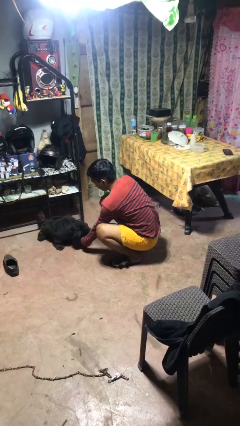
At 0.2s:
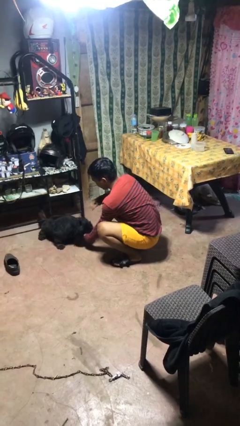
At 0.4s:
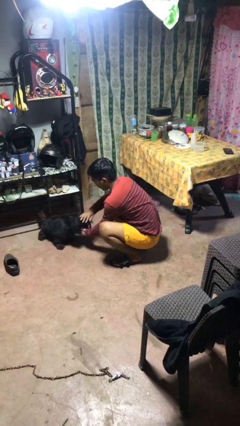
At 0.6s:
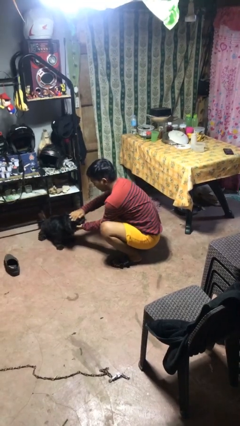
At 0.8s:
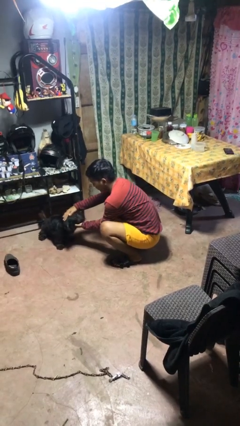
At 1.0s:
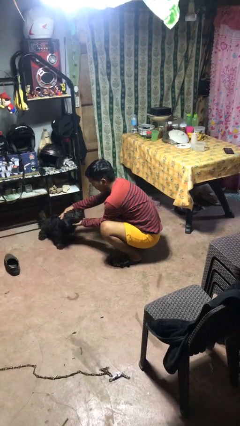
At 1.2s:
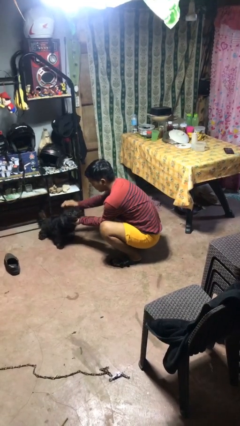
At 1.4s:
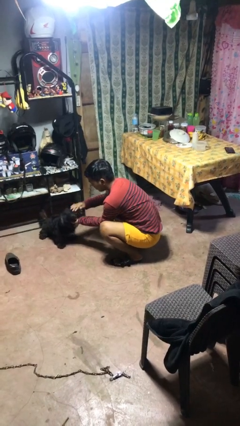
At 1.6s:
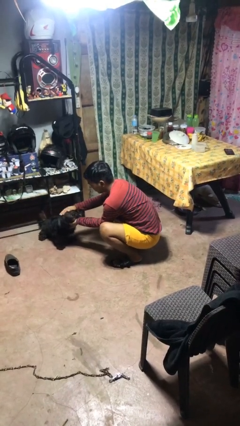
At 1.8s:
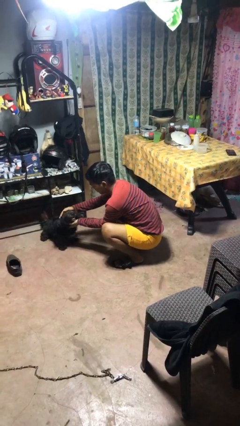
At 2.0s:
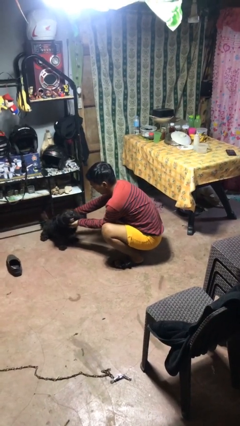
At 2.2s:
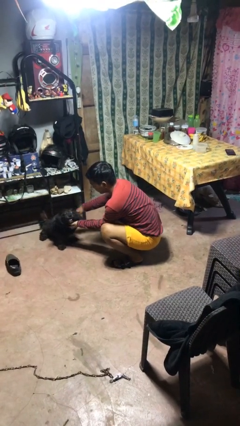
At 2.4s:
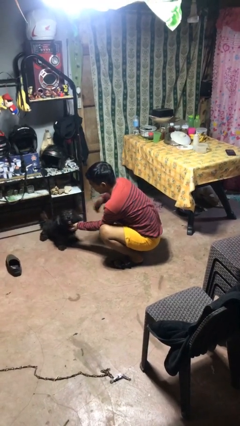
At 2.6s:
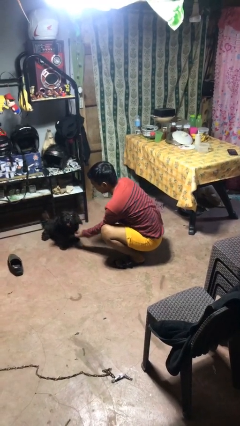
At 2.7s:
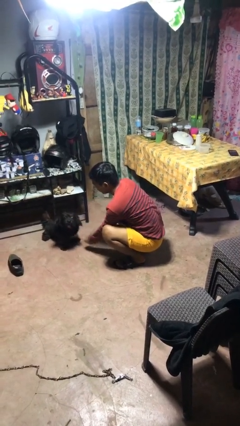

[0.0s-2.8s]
person pets dog

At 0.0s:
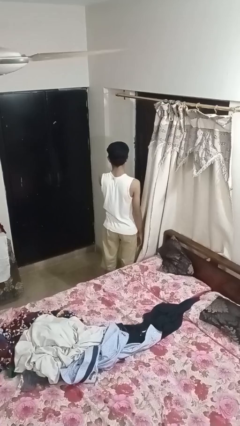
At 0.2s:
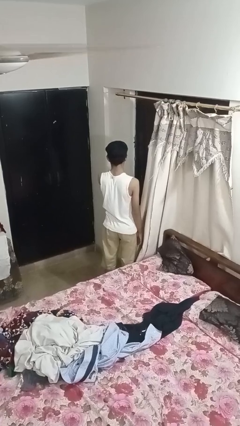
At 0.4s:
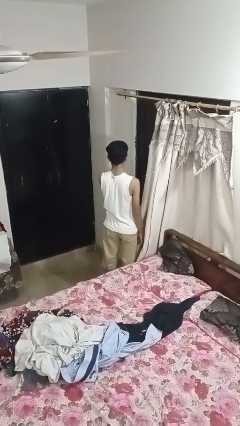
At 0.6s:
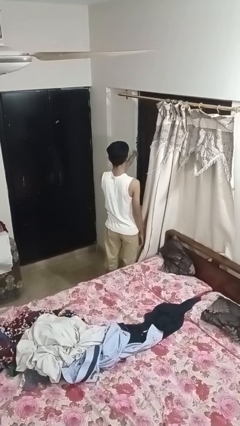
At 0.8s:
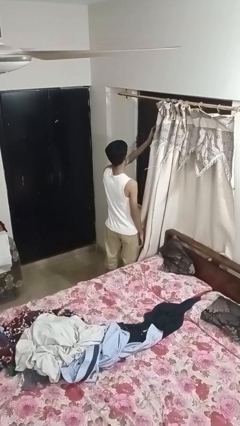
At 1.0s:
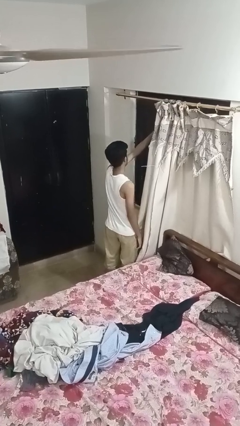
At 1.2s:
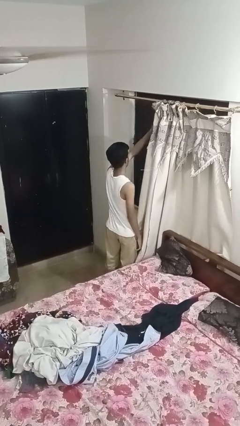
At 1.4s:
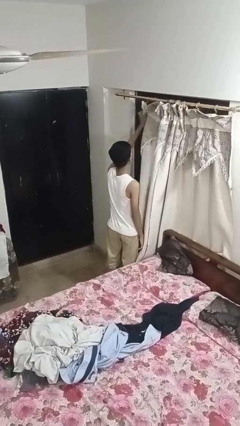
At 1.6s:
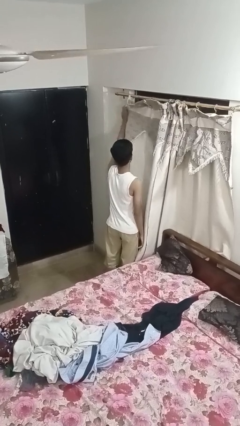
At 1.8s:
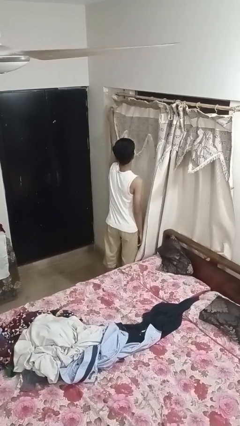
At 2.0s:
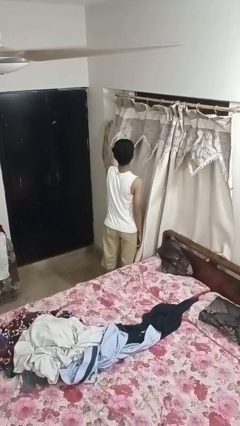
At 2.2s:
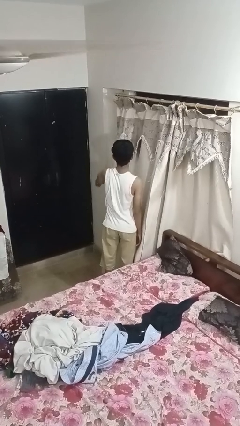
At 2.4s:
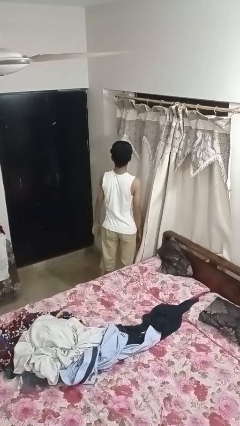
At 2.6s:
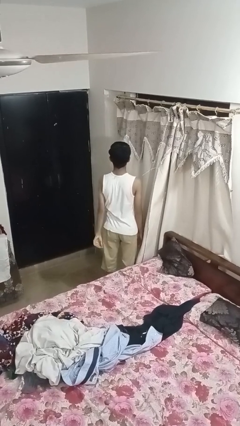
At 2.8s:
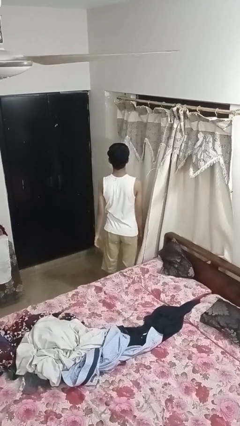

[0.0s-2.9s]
person closes curtains

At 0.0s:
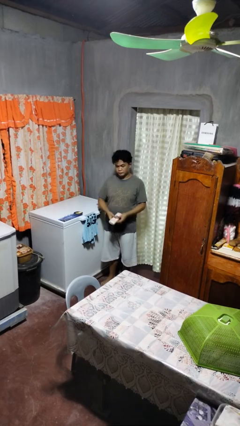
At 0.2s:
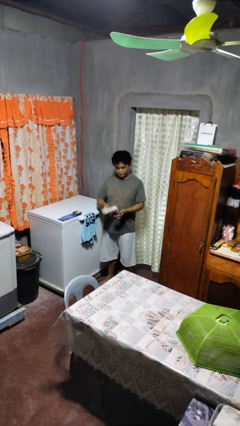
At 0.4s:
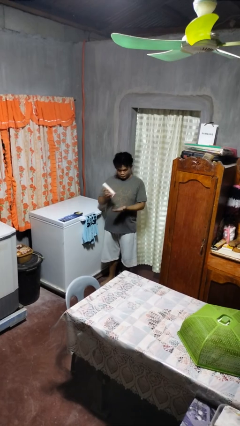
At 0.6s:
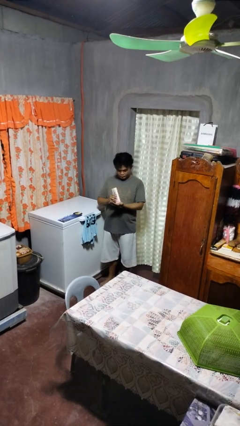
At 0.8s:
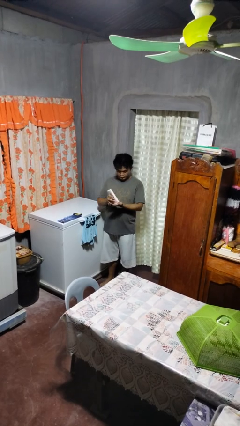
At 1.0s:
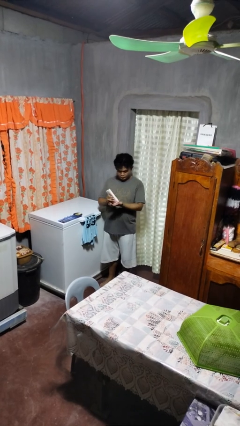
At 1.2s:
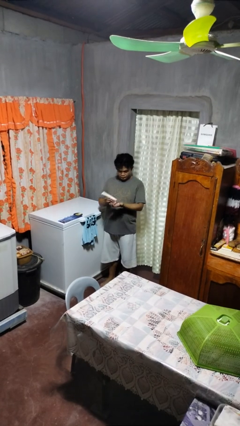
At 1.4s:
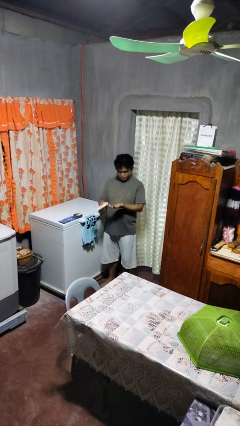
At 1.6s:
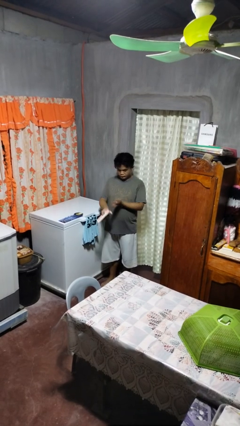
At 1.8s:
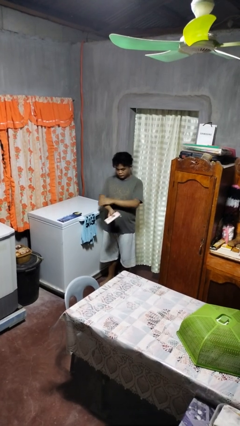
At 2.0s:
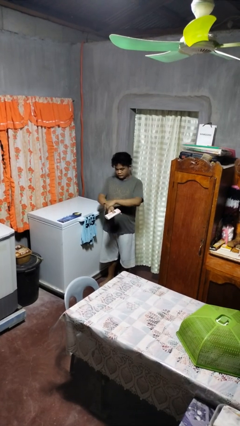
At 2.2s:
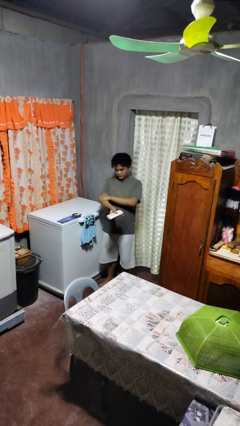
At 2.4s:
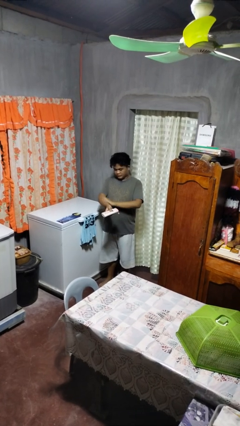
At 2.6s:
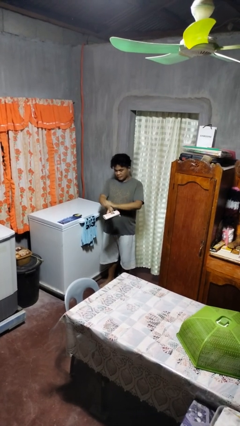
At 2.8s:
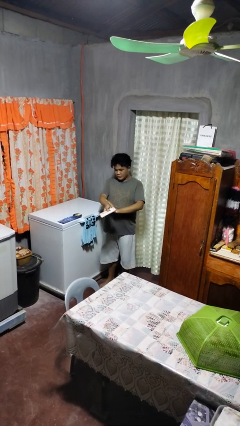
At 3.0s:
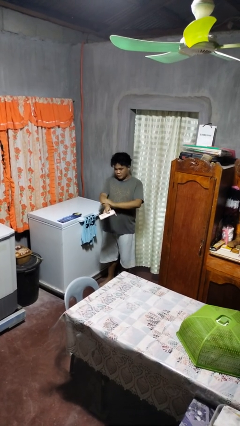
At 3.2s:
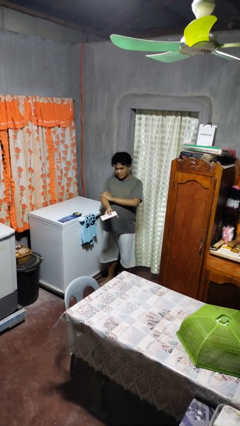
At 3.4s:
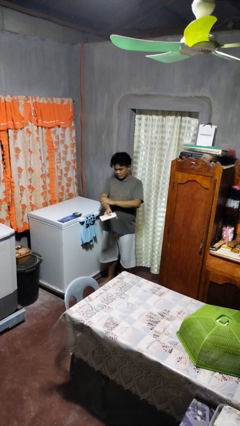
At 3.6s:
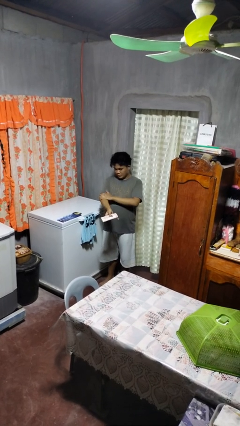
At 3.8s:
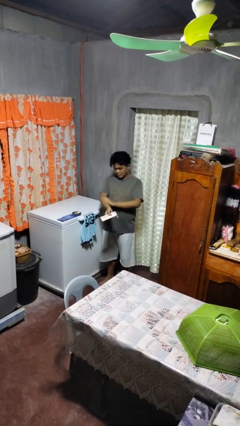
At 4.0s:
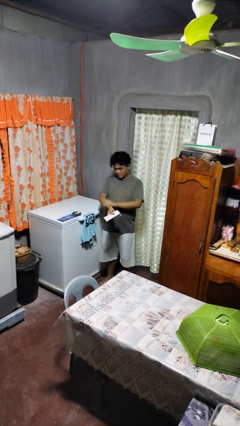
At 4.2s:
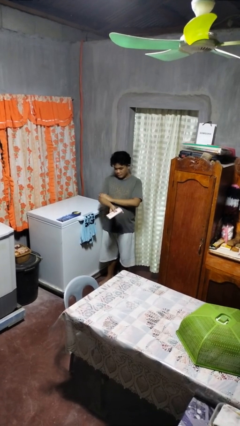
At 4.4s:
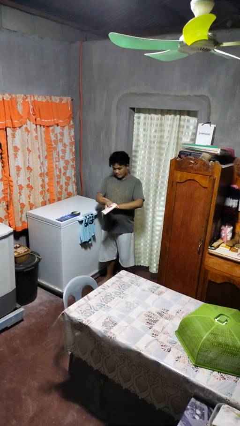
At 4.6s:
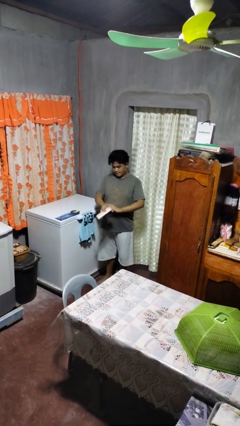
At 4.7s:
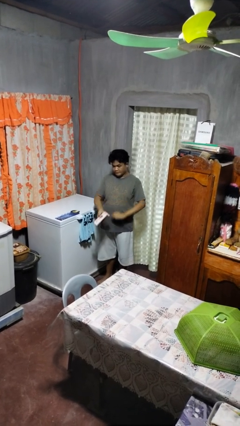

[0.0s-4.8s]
person applies sunscreen

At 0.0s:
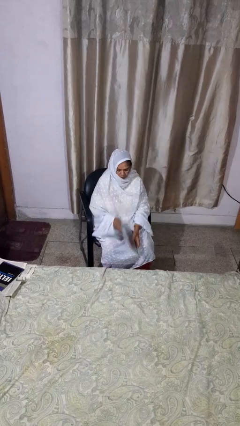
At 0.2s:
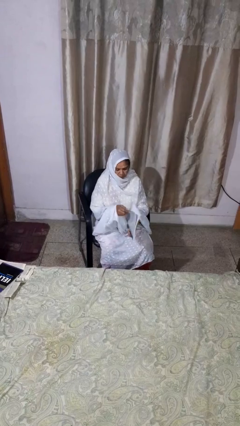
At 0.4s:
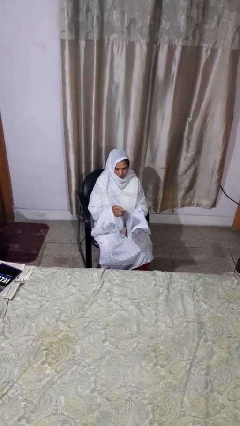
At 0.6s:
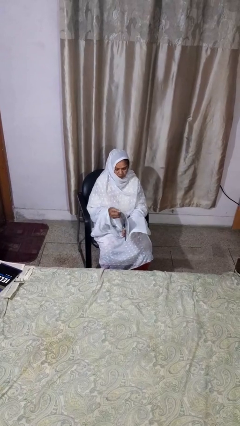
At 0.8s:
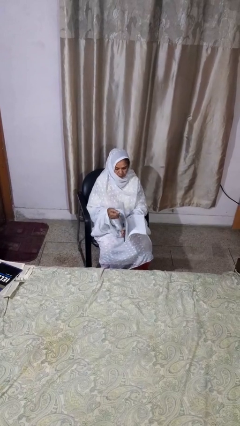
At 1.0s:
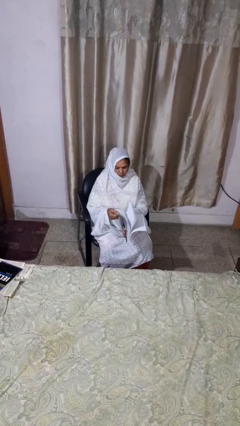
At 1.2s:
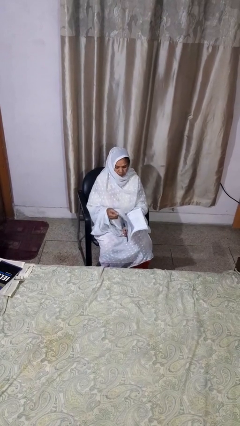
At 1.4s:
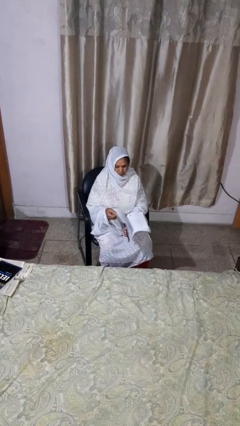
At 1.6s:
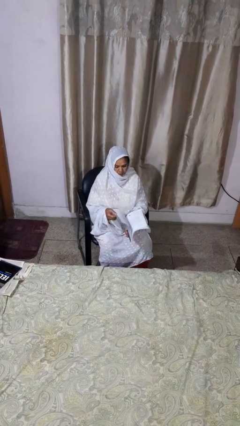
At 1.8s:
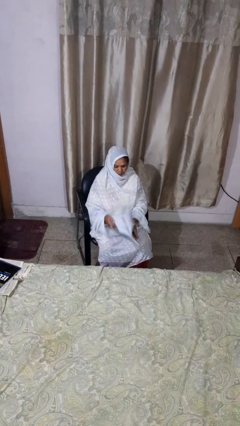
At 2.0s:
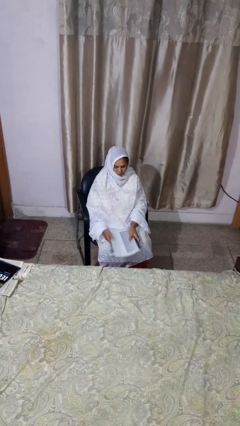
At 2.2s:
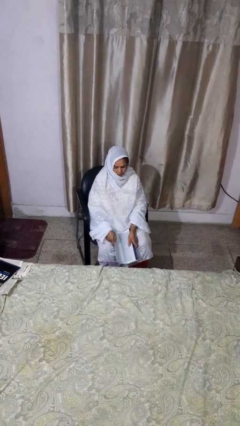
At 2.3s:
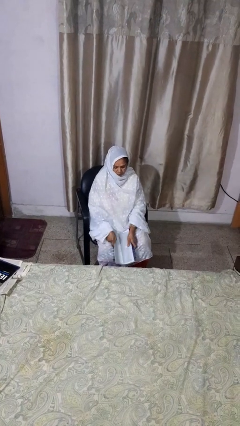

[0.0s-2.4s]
person reads magazine

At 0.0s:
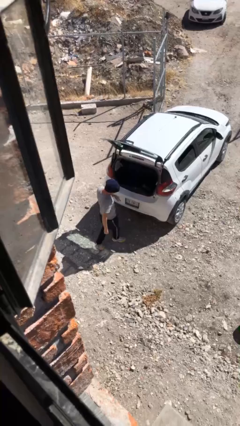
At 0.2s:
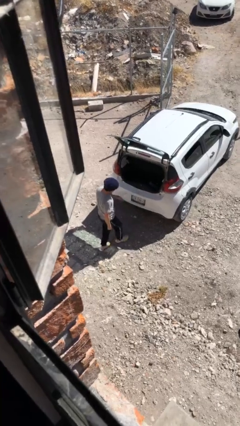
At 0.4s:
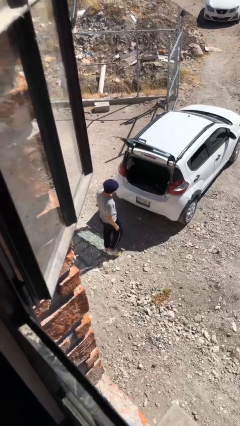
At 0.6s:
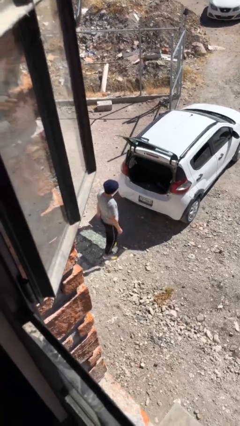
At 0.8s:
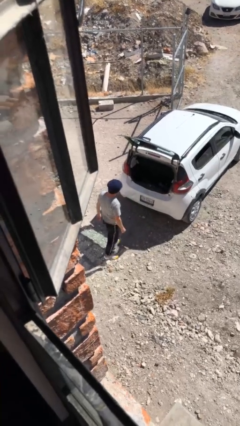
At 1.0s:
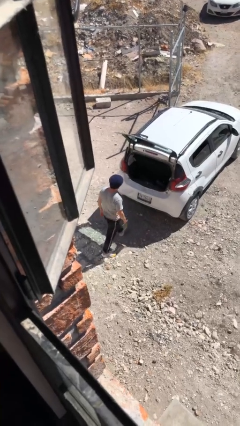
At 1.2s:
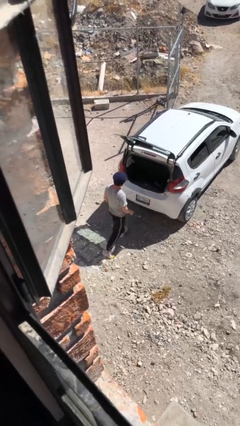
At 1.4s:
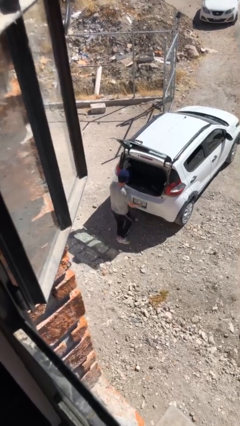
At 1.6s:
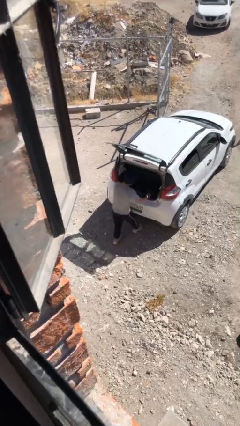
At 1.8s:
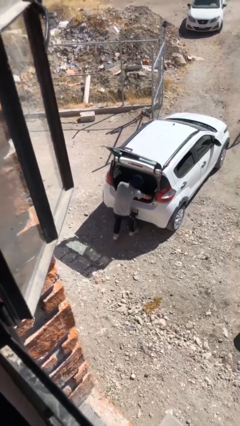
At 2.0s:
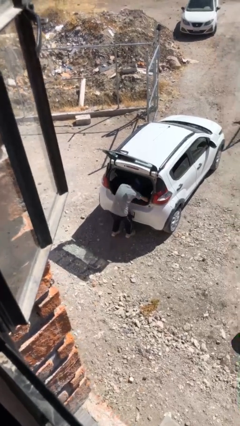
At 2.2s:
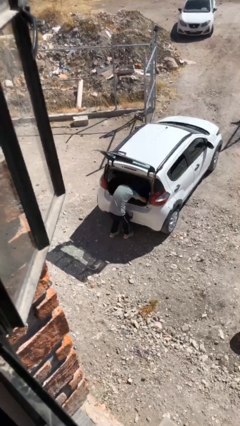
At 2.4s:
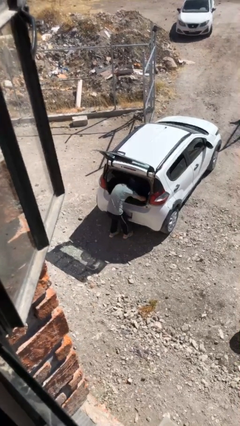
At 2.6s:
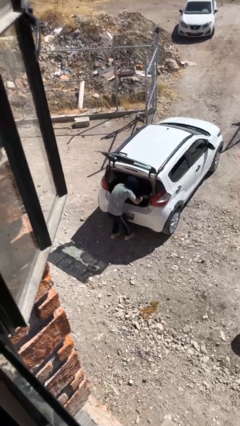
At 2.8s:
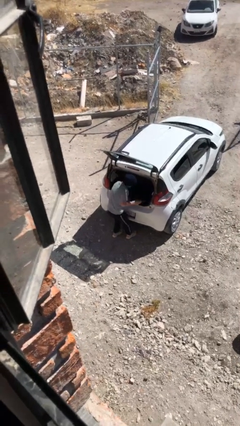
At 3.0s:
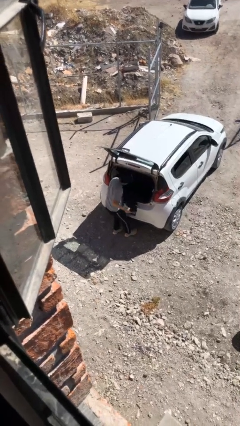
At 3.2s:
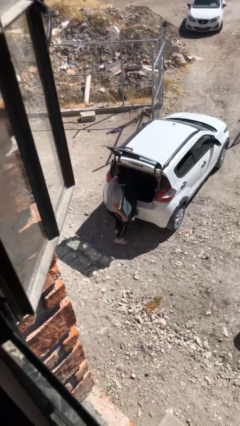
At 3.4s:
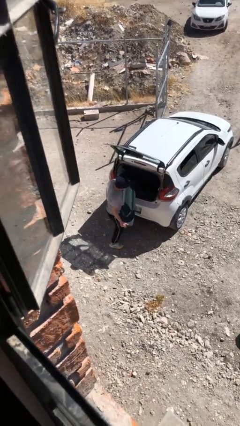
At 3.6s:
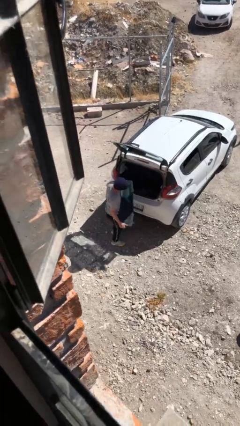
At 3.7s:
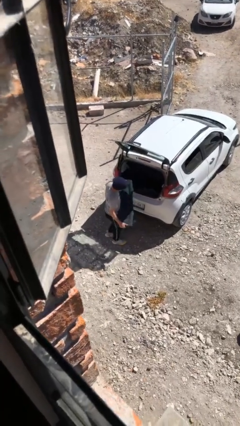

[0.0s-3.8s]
person unloads car

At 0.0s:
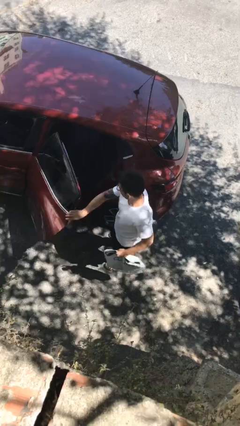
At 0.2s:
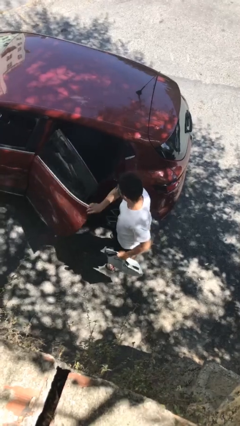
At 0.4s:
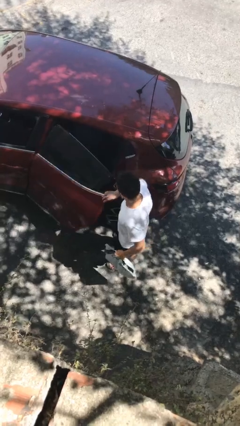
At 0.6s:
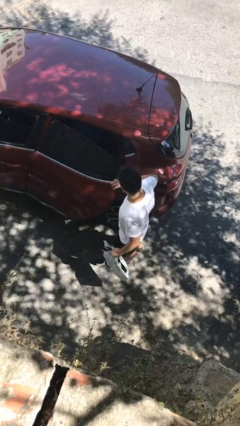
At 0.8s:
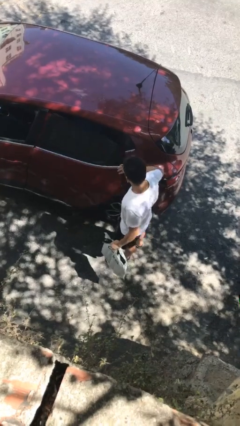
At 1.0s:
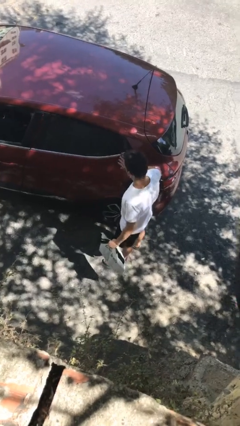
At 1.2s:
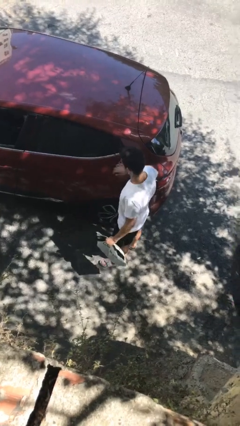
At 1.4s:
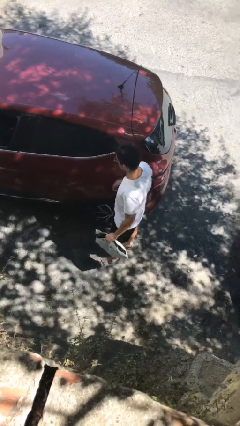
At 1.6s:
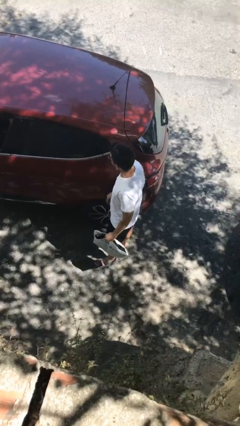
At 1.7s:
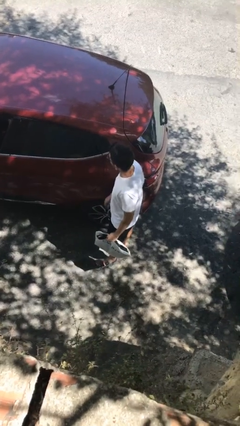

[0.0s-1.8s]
person closes car door
